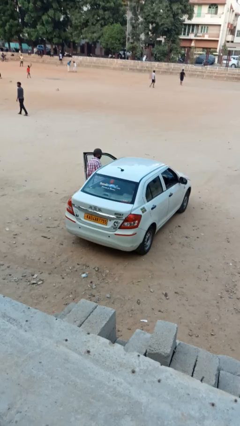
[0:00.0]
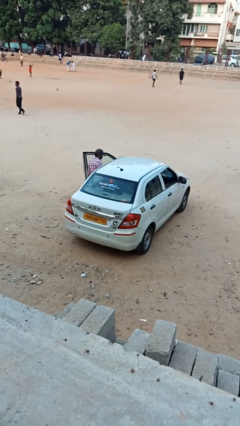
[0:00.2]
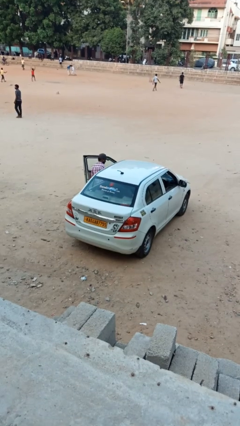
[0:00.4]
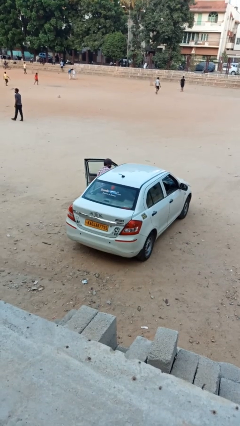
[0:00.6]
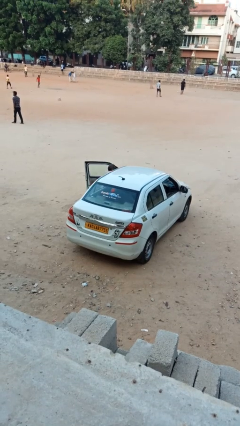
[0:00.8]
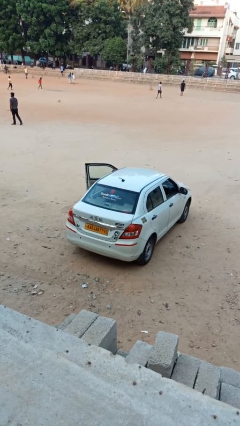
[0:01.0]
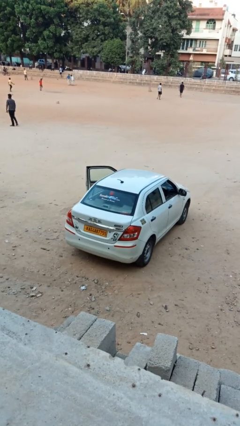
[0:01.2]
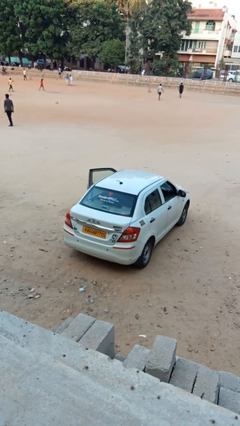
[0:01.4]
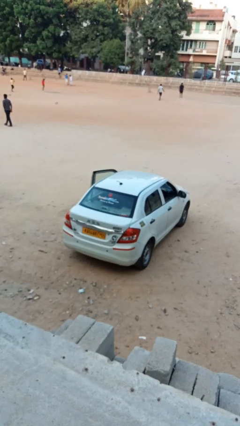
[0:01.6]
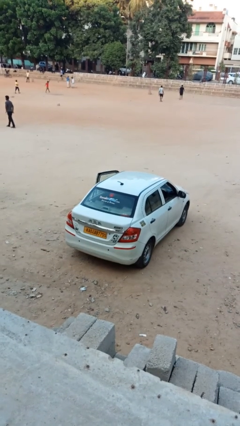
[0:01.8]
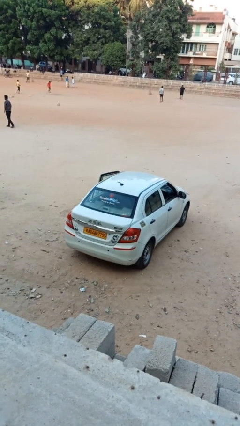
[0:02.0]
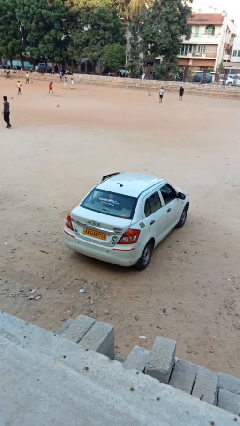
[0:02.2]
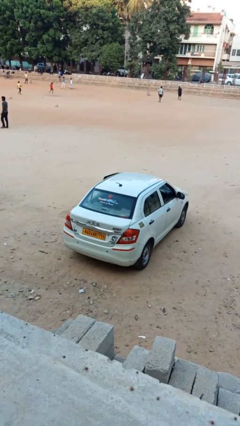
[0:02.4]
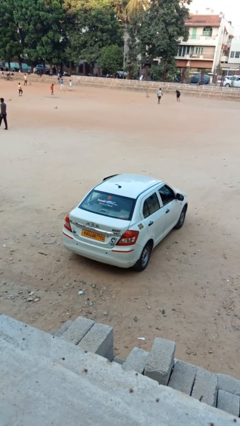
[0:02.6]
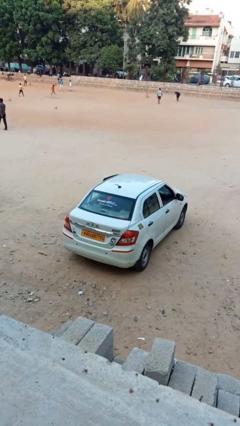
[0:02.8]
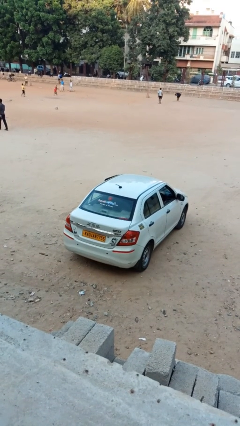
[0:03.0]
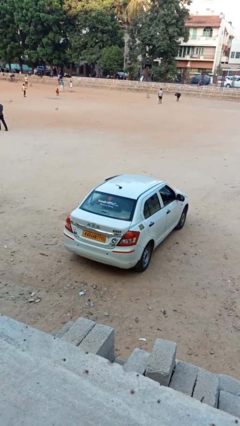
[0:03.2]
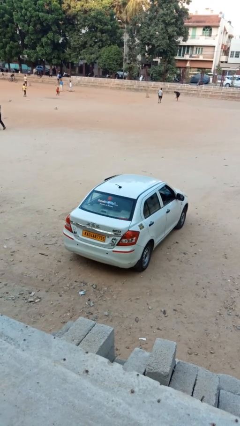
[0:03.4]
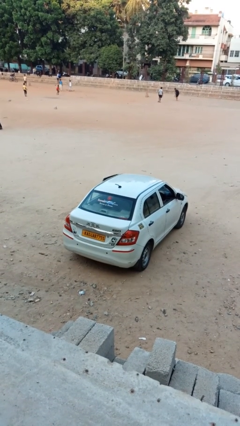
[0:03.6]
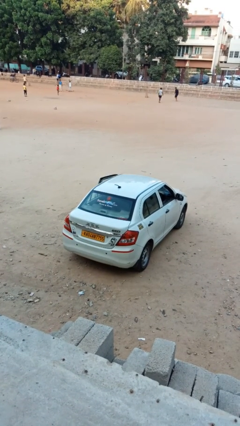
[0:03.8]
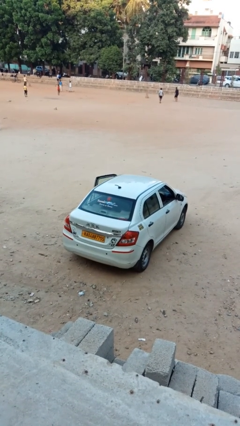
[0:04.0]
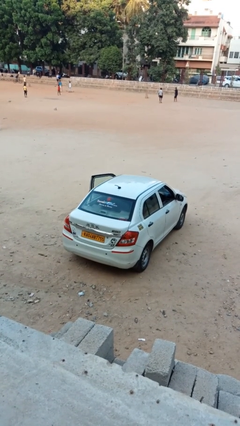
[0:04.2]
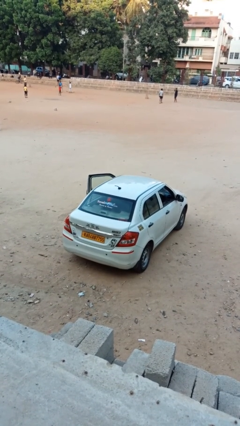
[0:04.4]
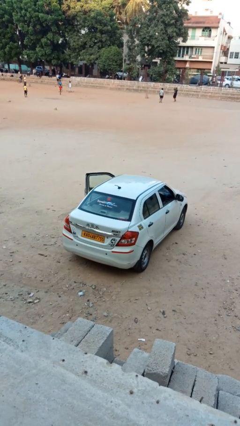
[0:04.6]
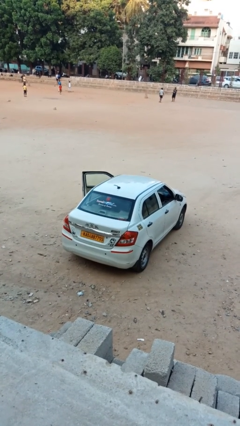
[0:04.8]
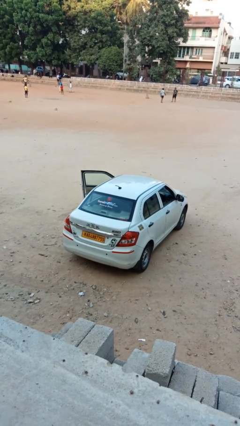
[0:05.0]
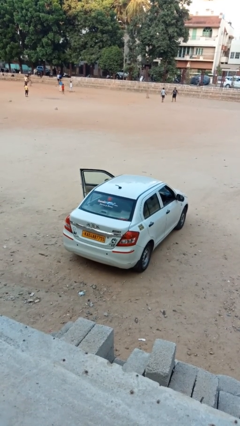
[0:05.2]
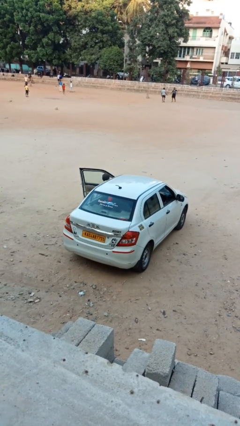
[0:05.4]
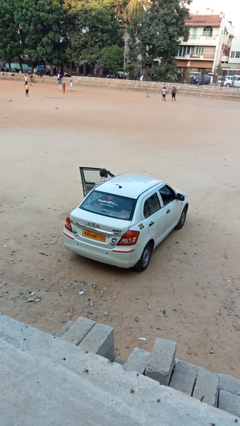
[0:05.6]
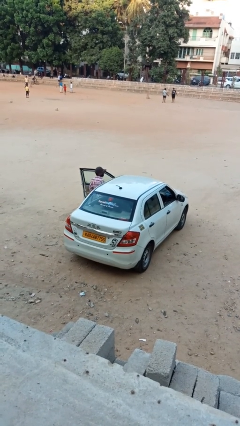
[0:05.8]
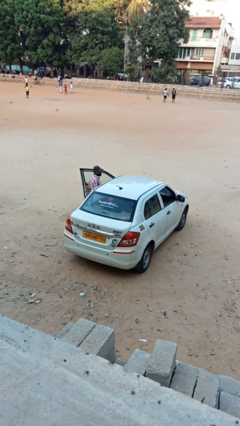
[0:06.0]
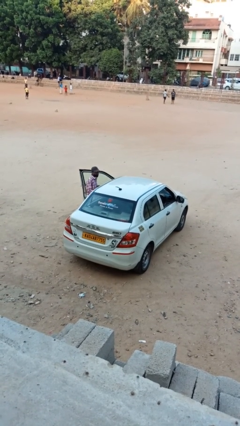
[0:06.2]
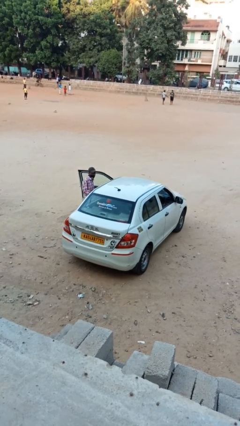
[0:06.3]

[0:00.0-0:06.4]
car picks up person

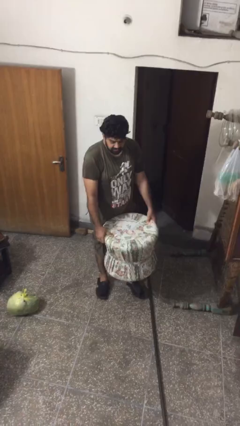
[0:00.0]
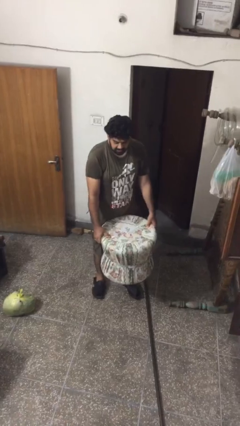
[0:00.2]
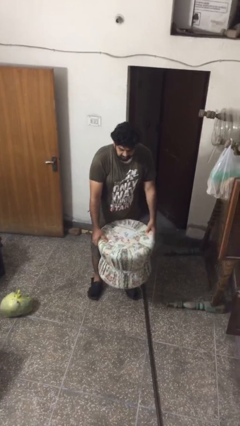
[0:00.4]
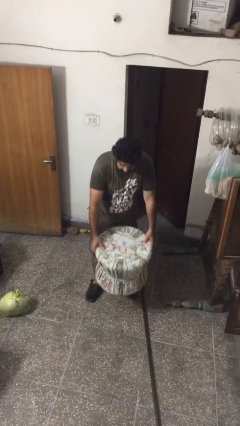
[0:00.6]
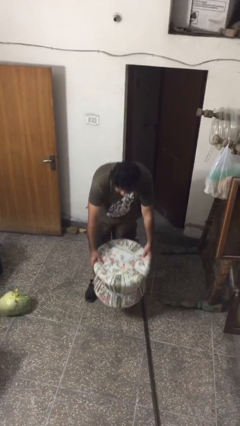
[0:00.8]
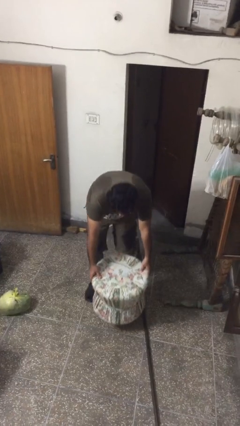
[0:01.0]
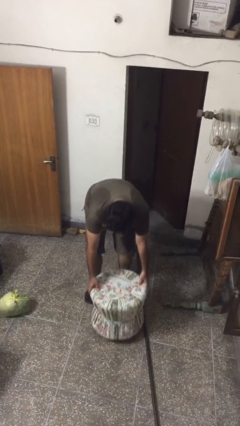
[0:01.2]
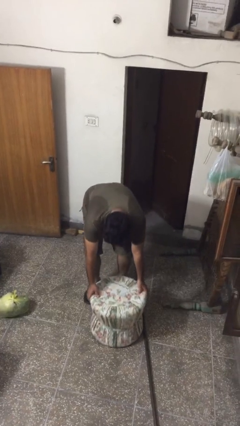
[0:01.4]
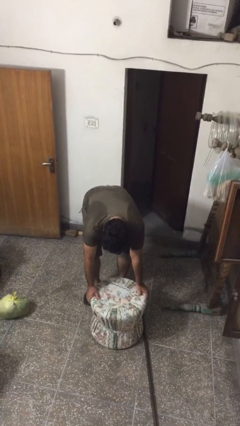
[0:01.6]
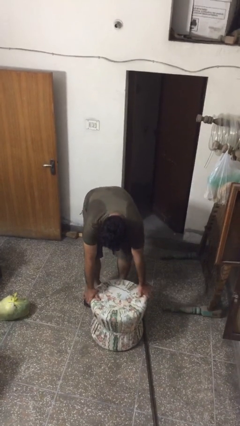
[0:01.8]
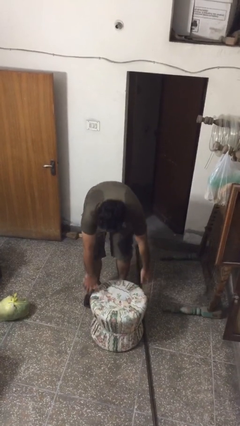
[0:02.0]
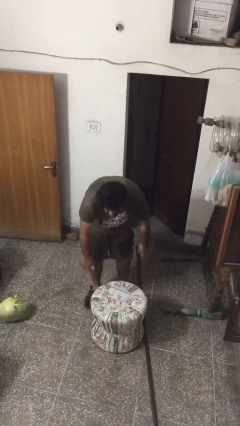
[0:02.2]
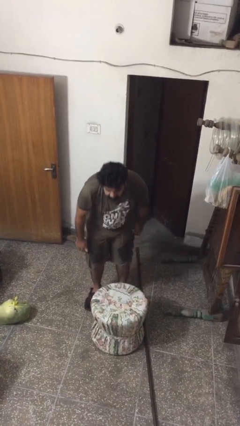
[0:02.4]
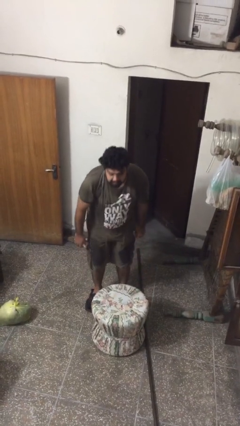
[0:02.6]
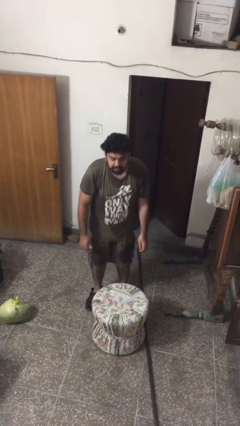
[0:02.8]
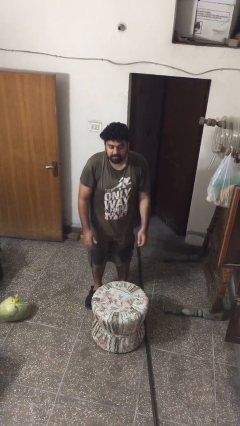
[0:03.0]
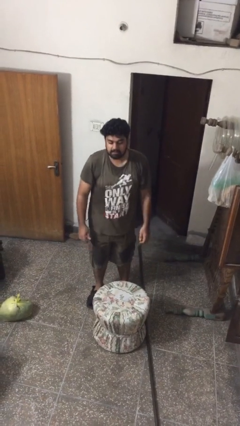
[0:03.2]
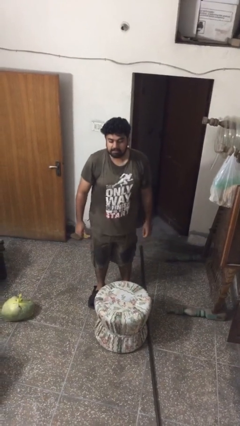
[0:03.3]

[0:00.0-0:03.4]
person puts down object on floor

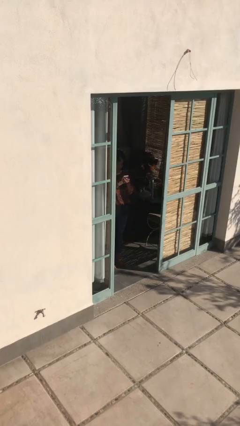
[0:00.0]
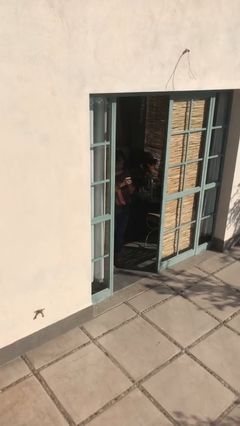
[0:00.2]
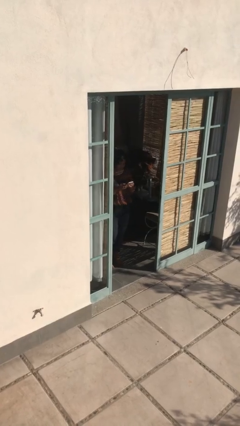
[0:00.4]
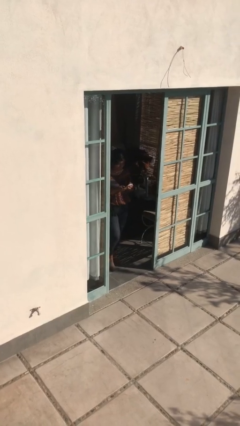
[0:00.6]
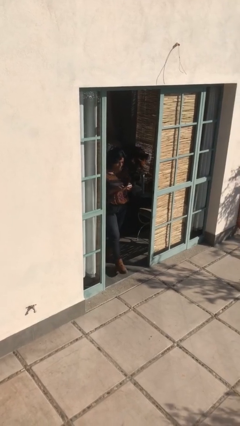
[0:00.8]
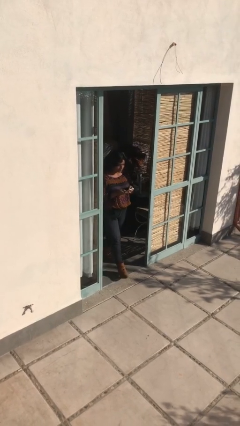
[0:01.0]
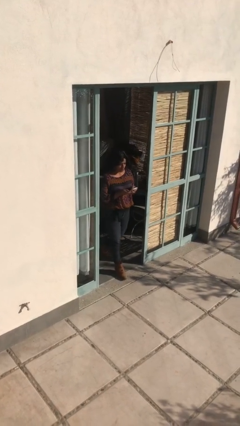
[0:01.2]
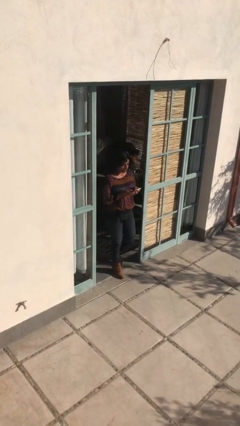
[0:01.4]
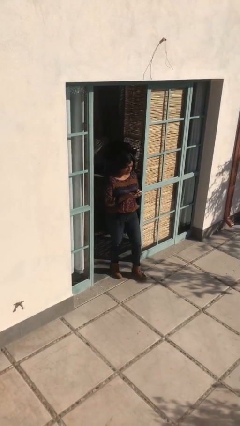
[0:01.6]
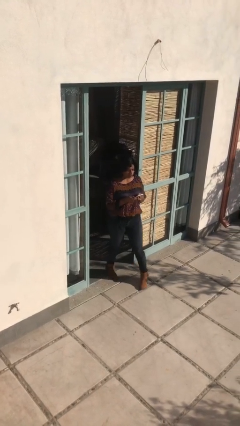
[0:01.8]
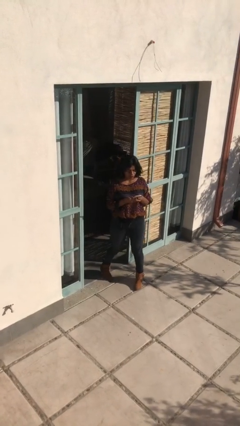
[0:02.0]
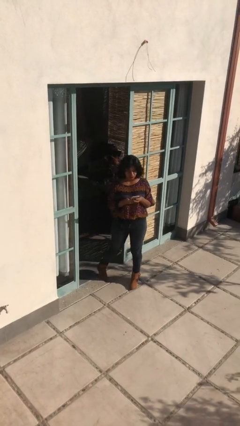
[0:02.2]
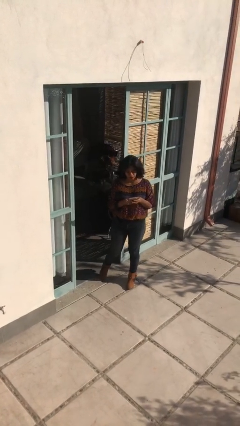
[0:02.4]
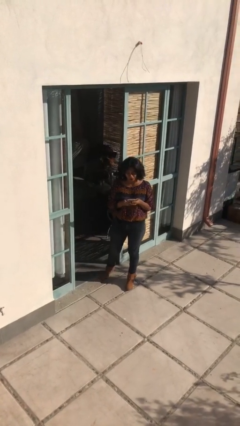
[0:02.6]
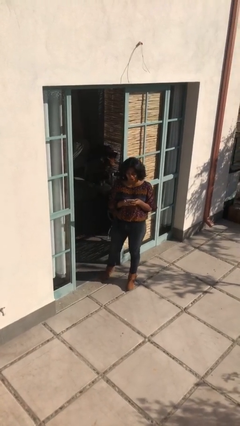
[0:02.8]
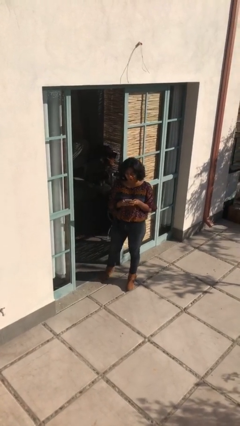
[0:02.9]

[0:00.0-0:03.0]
person enters scene through structure

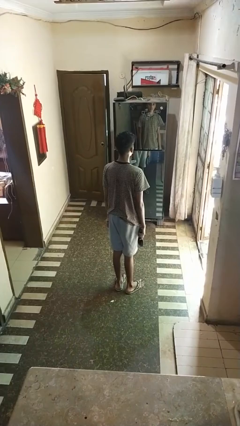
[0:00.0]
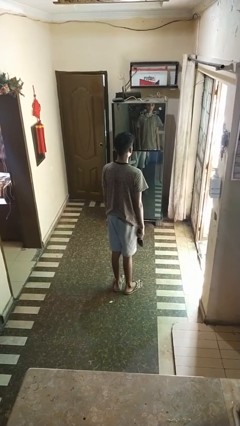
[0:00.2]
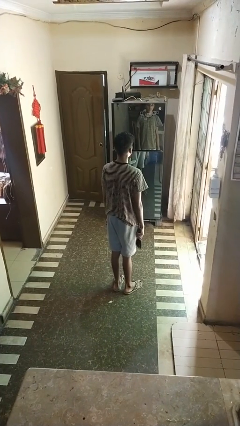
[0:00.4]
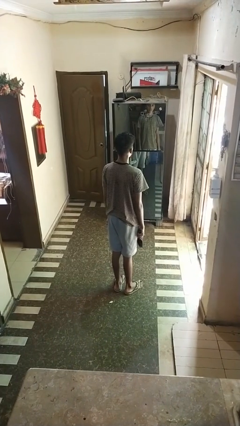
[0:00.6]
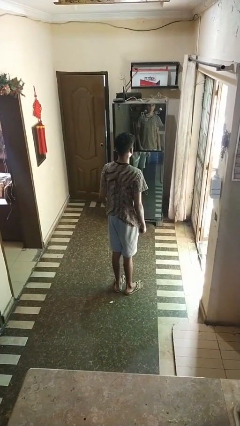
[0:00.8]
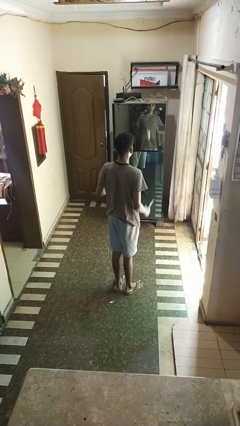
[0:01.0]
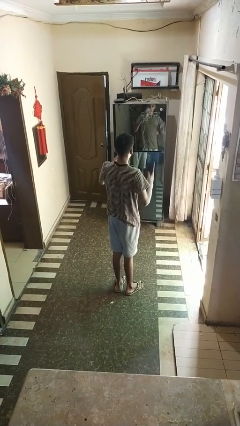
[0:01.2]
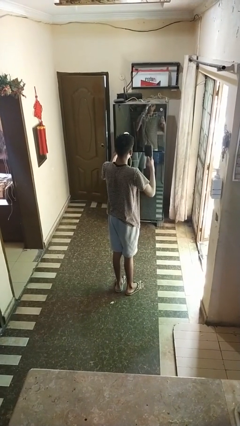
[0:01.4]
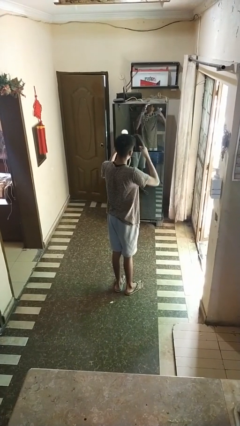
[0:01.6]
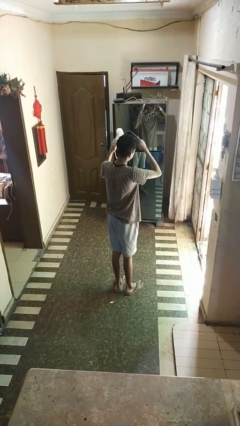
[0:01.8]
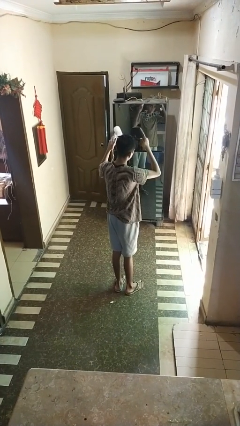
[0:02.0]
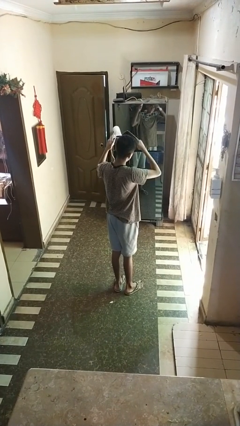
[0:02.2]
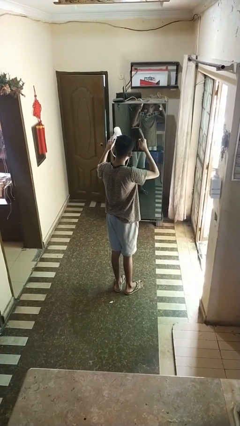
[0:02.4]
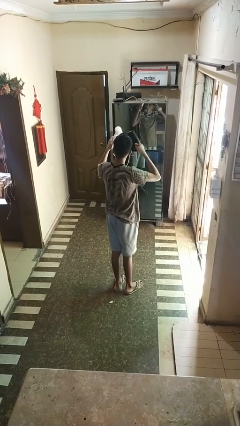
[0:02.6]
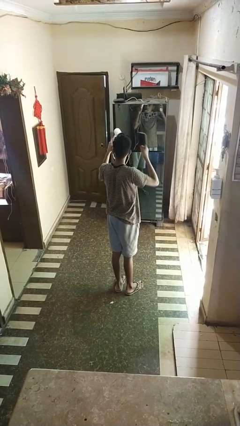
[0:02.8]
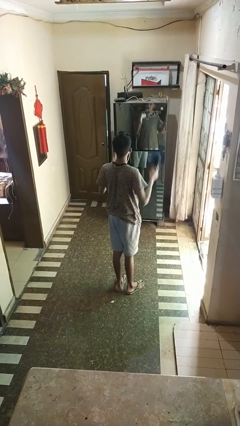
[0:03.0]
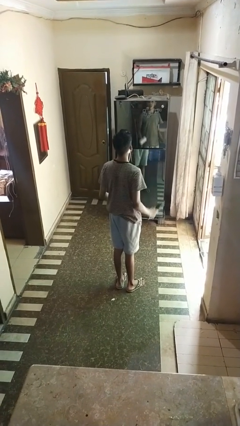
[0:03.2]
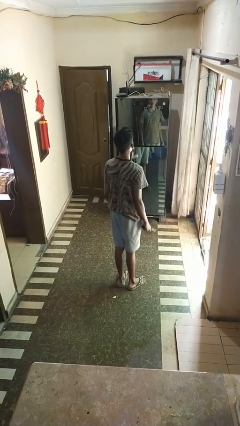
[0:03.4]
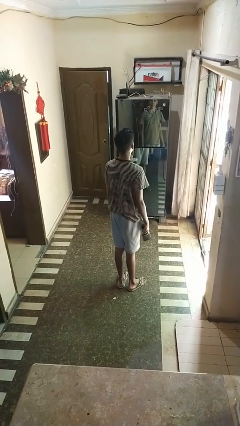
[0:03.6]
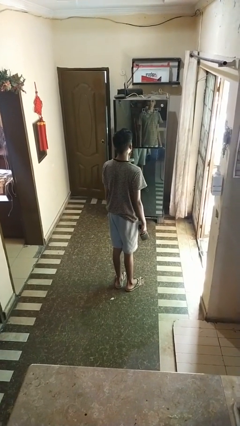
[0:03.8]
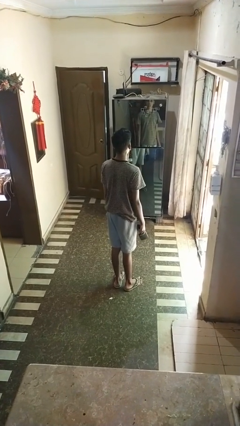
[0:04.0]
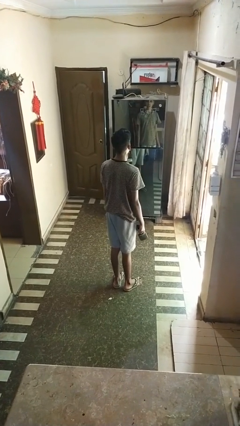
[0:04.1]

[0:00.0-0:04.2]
person dries hair with hairdryer

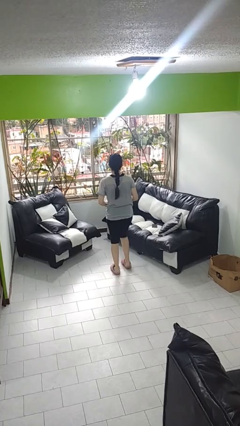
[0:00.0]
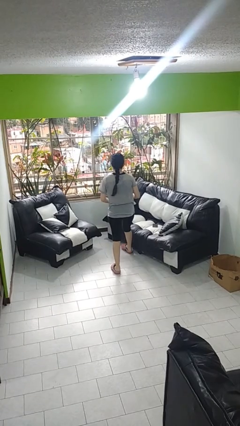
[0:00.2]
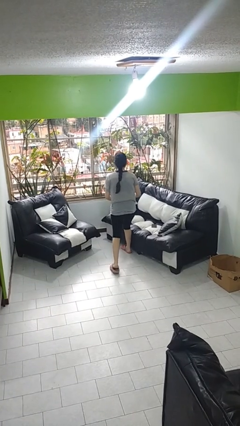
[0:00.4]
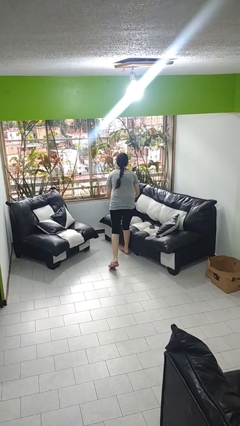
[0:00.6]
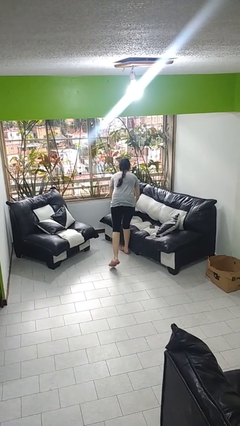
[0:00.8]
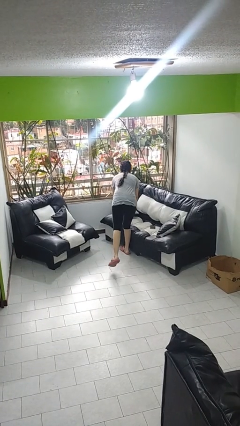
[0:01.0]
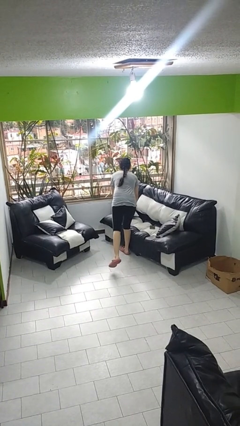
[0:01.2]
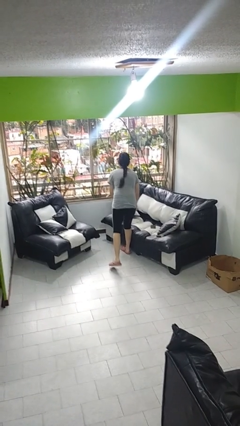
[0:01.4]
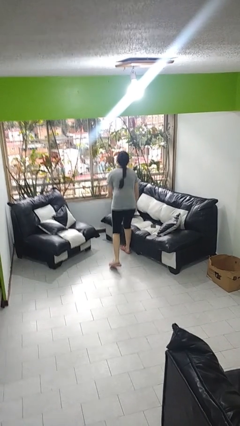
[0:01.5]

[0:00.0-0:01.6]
person puts down object on couch
